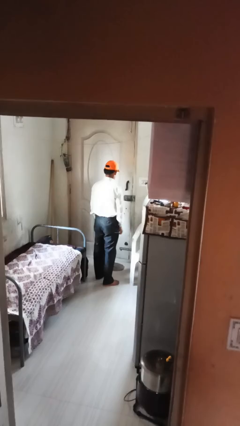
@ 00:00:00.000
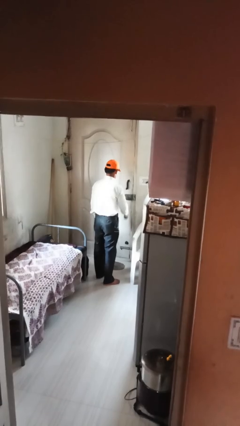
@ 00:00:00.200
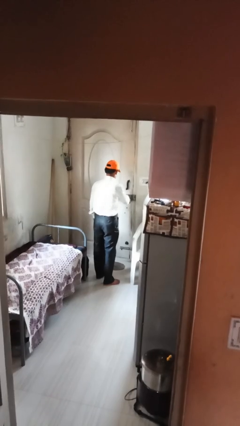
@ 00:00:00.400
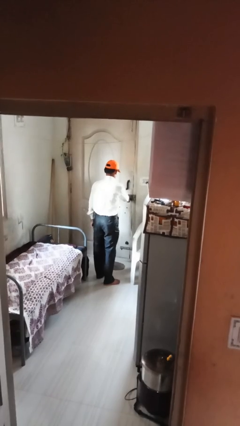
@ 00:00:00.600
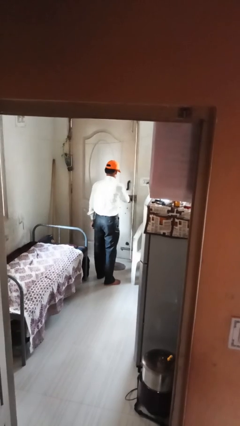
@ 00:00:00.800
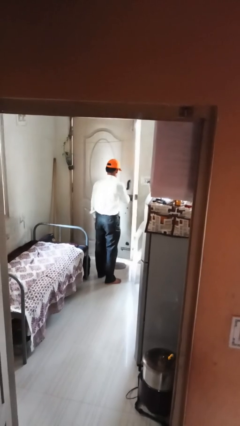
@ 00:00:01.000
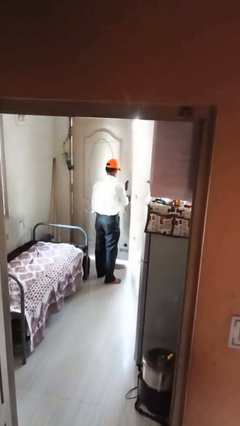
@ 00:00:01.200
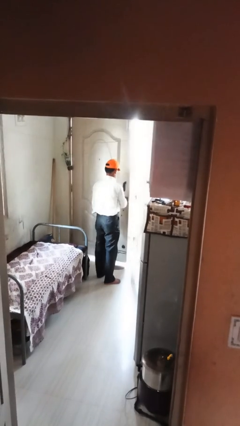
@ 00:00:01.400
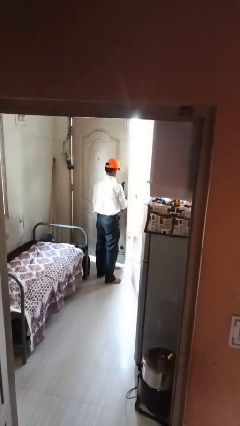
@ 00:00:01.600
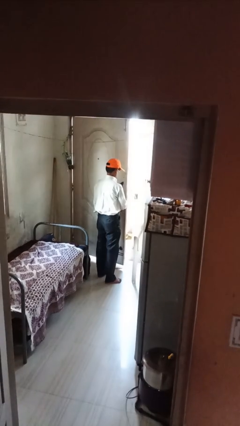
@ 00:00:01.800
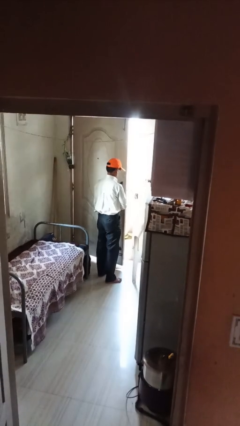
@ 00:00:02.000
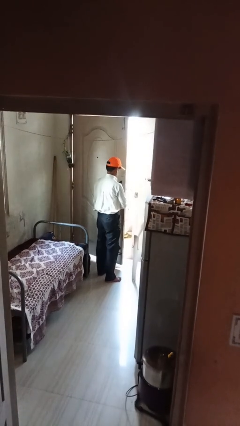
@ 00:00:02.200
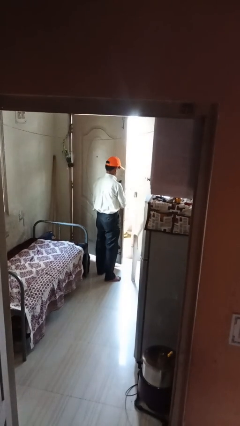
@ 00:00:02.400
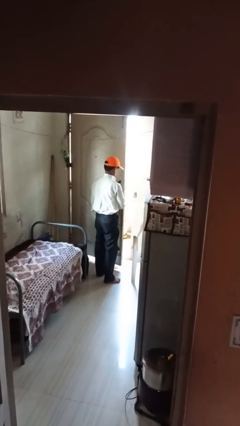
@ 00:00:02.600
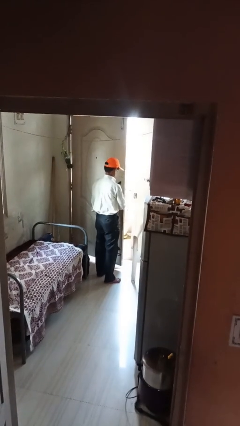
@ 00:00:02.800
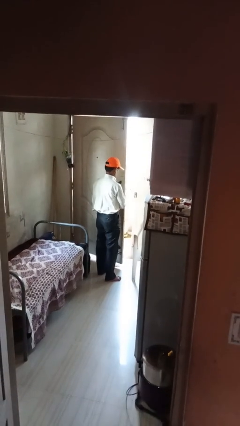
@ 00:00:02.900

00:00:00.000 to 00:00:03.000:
person opens facility door

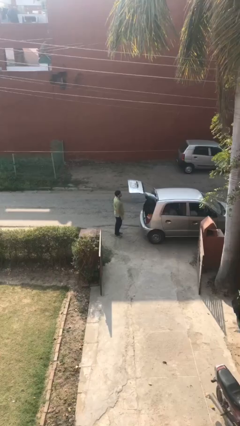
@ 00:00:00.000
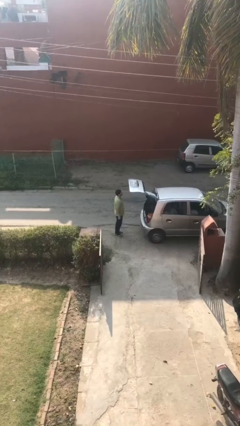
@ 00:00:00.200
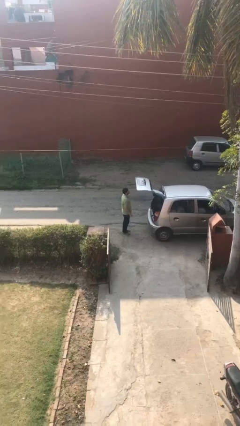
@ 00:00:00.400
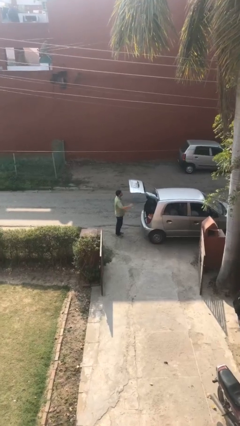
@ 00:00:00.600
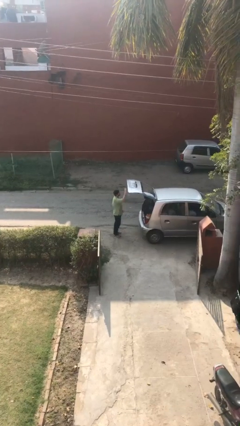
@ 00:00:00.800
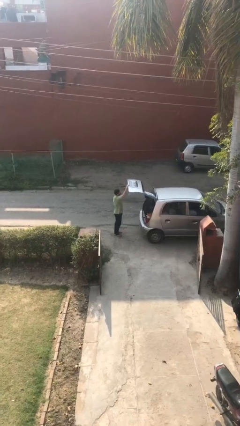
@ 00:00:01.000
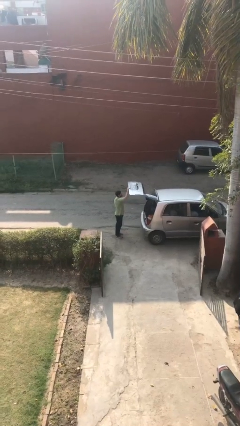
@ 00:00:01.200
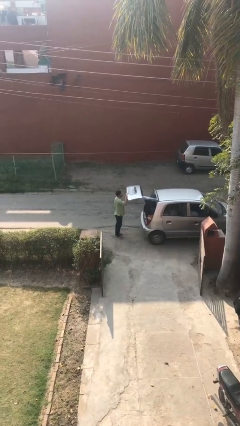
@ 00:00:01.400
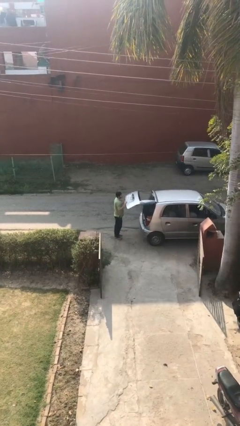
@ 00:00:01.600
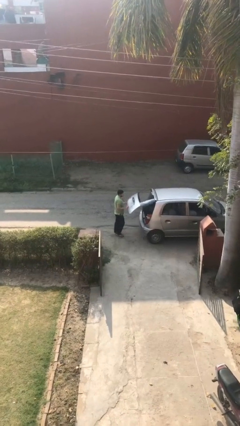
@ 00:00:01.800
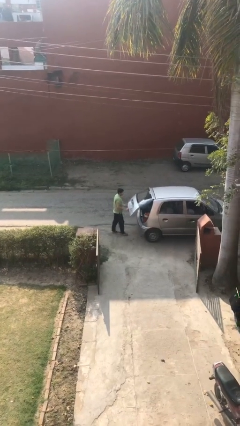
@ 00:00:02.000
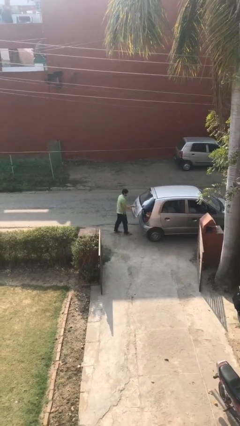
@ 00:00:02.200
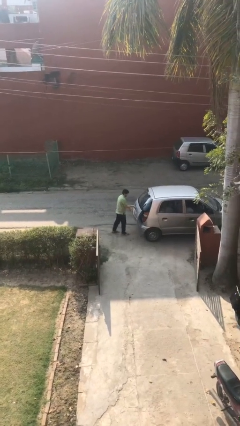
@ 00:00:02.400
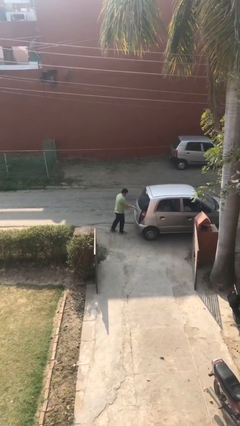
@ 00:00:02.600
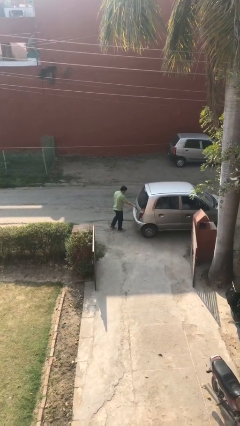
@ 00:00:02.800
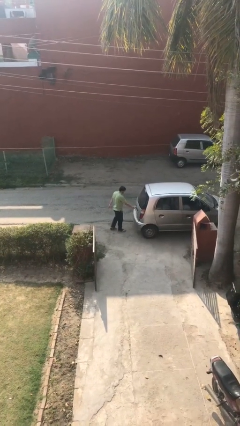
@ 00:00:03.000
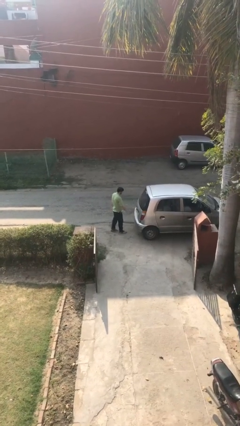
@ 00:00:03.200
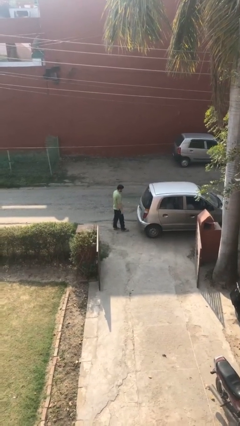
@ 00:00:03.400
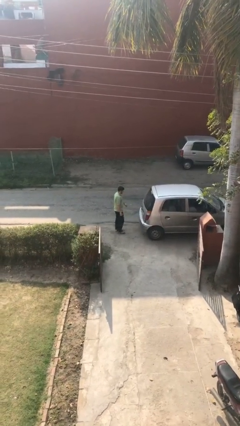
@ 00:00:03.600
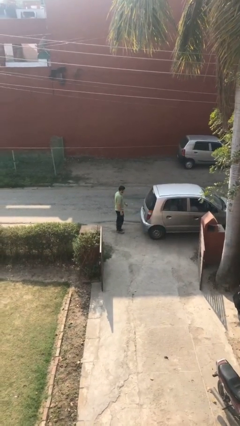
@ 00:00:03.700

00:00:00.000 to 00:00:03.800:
person closes car trunk

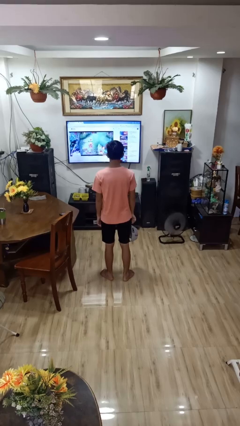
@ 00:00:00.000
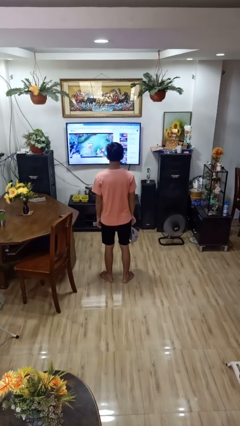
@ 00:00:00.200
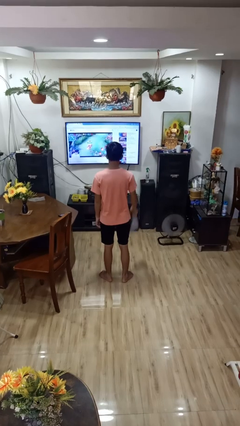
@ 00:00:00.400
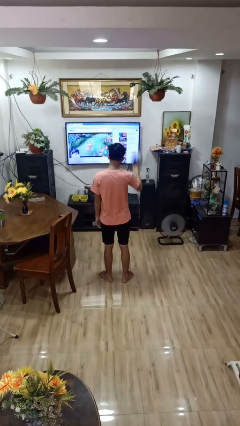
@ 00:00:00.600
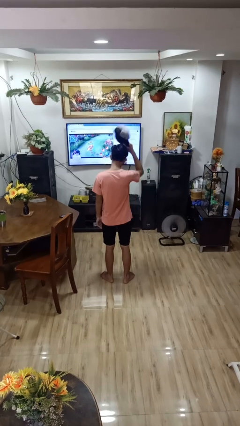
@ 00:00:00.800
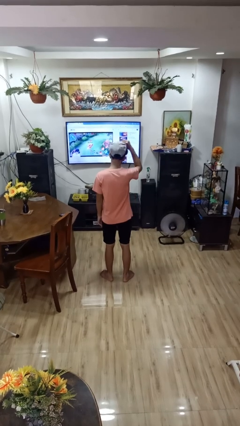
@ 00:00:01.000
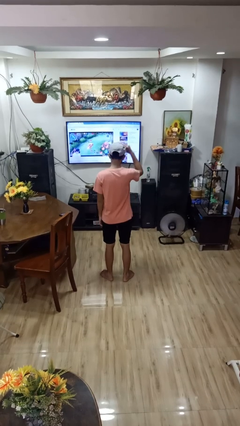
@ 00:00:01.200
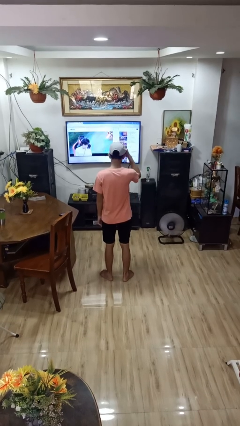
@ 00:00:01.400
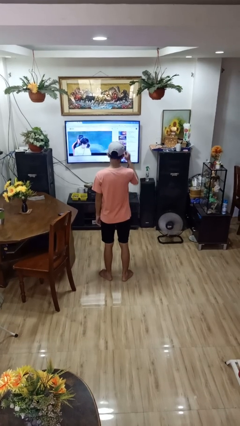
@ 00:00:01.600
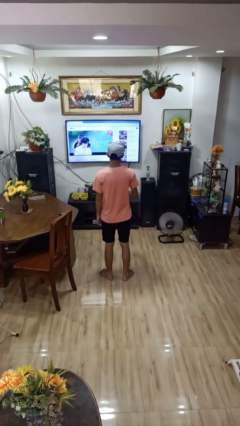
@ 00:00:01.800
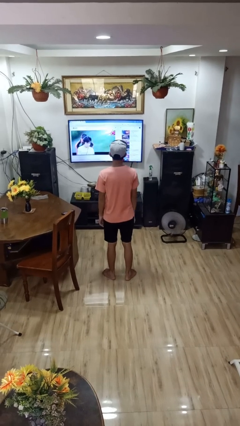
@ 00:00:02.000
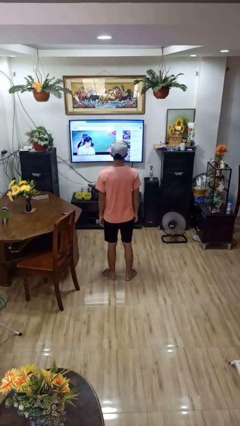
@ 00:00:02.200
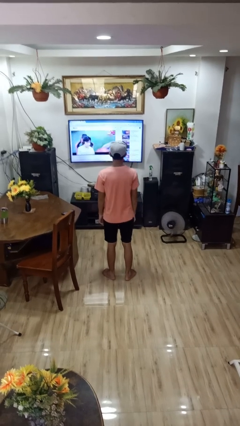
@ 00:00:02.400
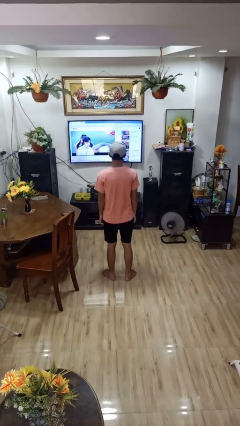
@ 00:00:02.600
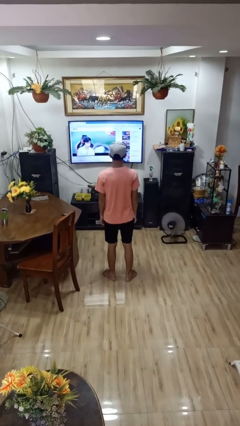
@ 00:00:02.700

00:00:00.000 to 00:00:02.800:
person puts on hat

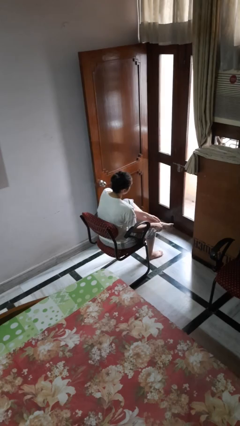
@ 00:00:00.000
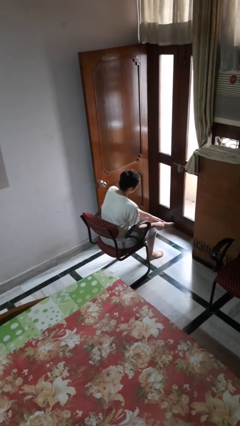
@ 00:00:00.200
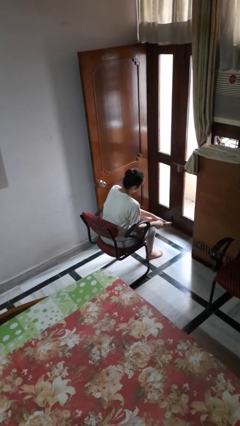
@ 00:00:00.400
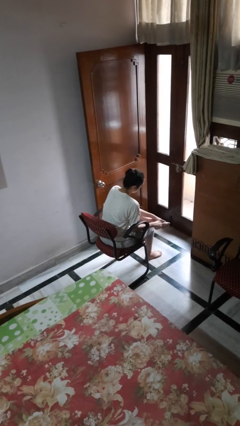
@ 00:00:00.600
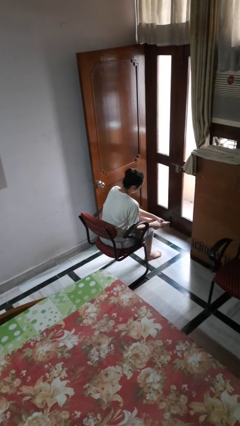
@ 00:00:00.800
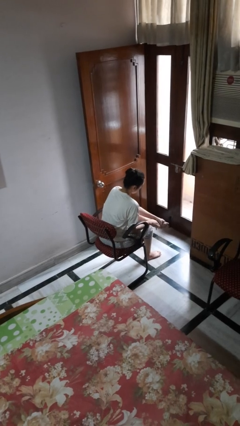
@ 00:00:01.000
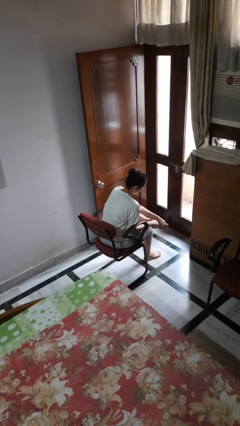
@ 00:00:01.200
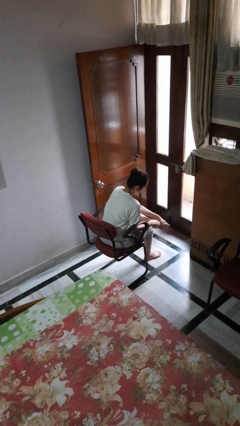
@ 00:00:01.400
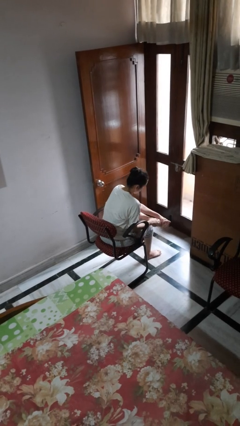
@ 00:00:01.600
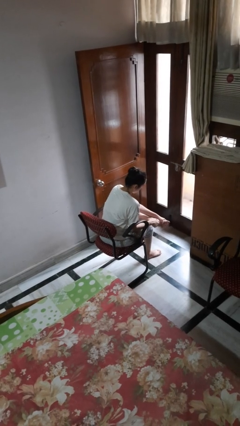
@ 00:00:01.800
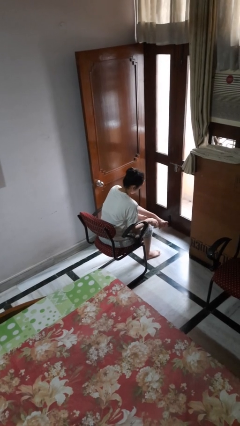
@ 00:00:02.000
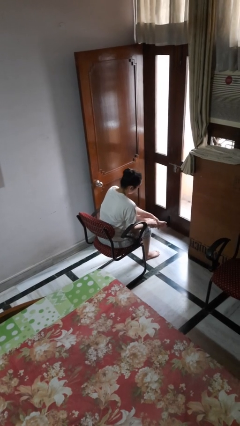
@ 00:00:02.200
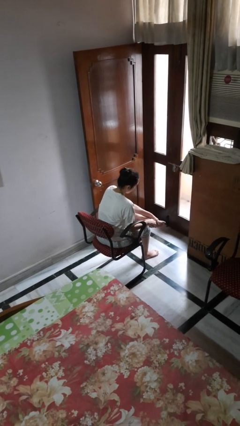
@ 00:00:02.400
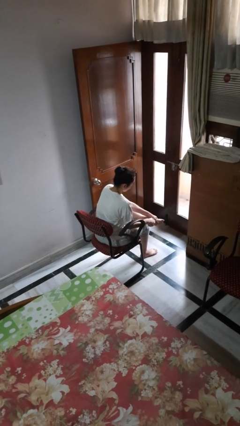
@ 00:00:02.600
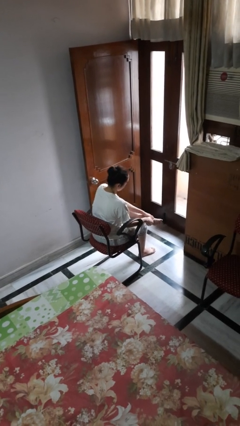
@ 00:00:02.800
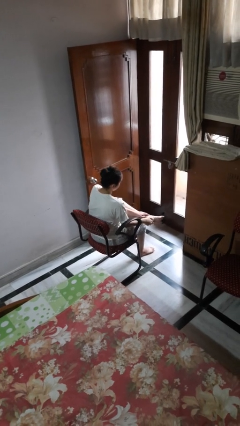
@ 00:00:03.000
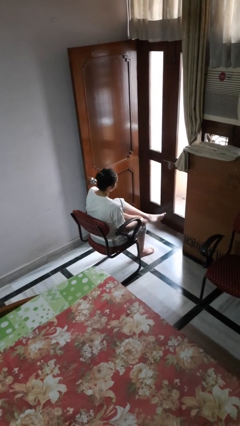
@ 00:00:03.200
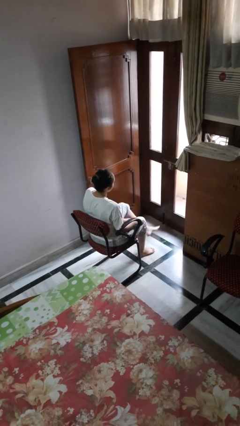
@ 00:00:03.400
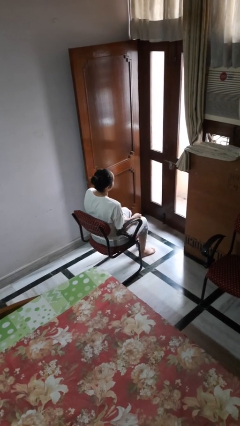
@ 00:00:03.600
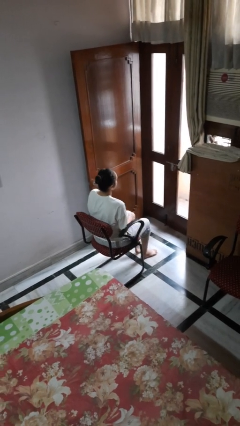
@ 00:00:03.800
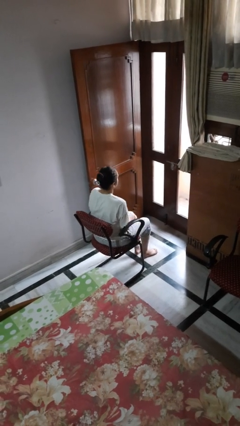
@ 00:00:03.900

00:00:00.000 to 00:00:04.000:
person rubs foot

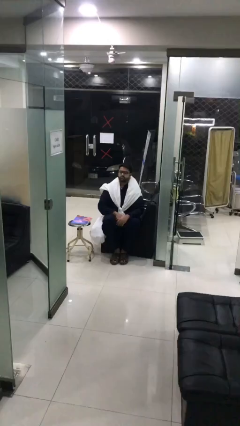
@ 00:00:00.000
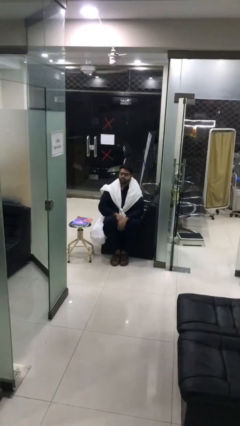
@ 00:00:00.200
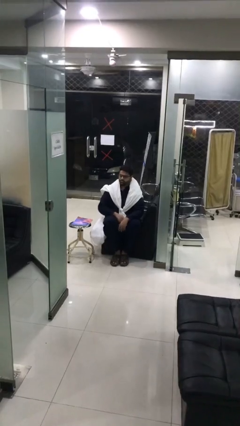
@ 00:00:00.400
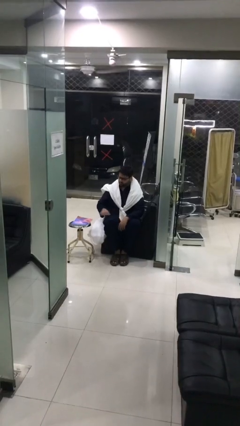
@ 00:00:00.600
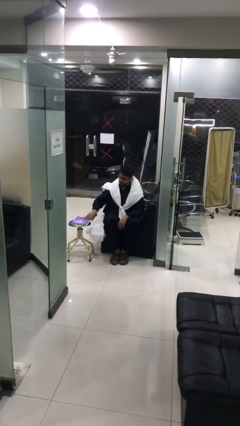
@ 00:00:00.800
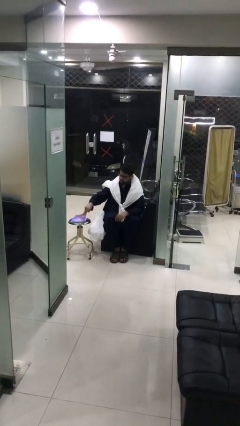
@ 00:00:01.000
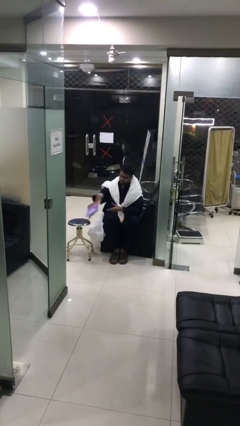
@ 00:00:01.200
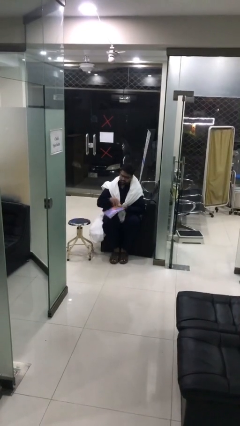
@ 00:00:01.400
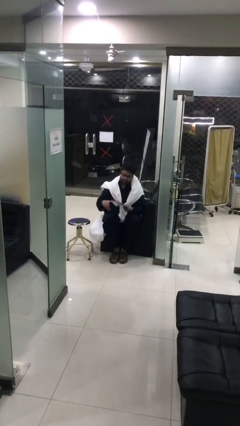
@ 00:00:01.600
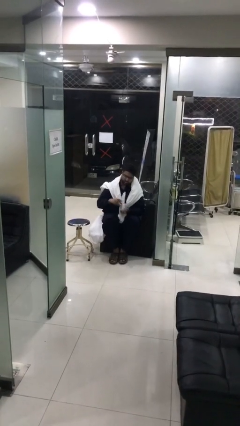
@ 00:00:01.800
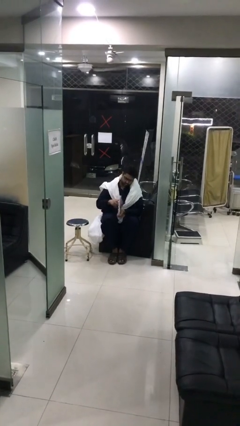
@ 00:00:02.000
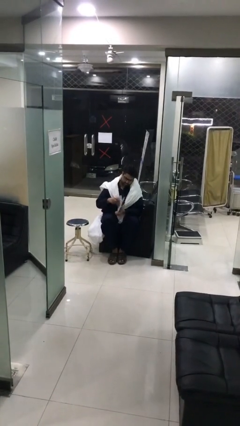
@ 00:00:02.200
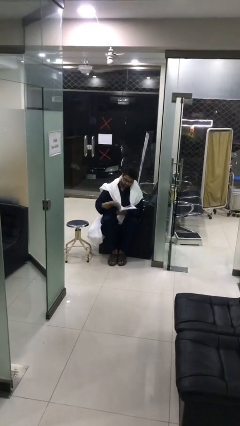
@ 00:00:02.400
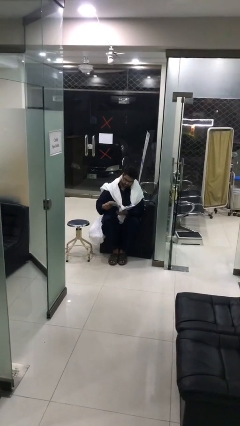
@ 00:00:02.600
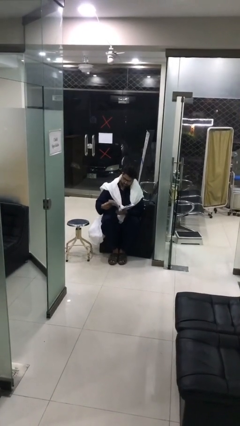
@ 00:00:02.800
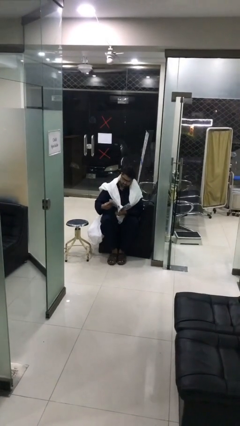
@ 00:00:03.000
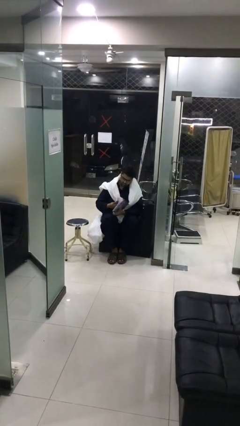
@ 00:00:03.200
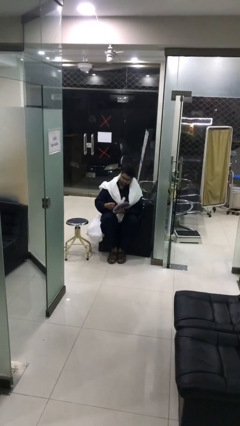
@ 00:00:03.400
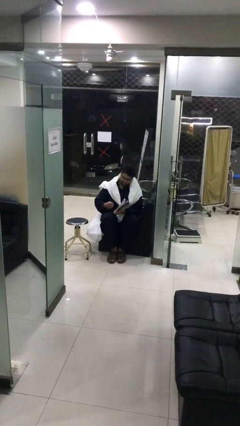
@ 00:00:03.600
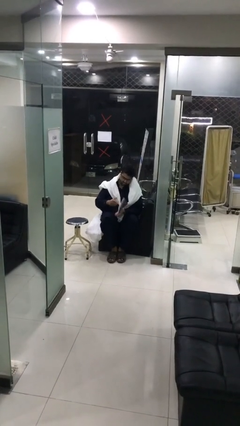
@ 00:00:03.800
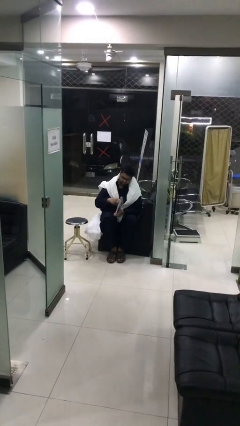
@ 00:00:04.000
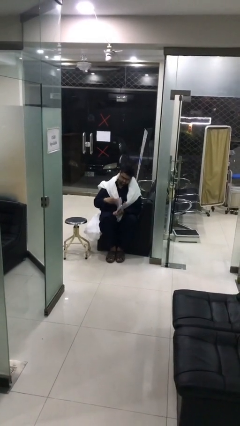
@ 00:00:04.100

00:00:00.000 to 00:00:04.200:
person reads document
